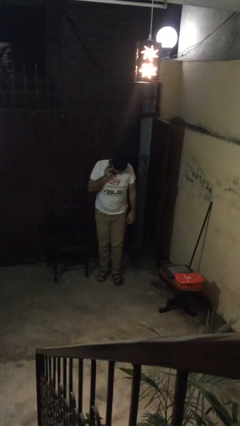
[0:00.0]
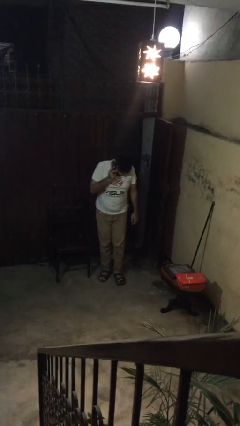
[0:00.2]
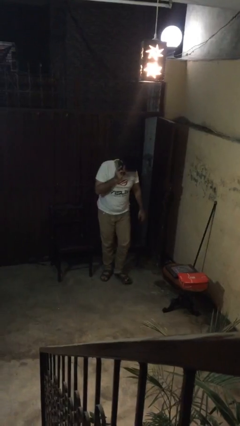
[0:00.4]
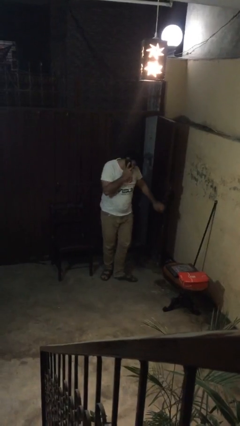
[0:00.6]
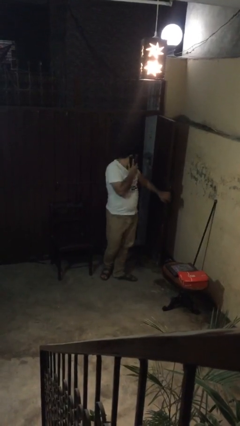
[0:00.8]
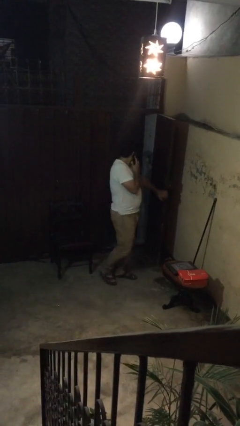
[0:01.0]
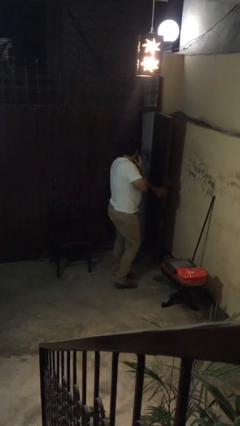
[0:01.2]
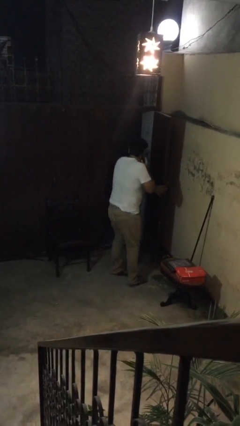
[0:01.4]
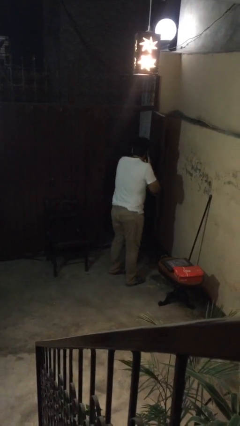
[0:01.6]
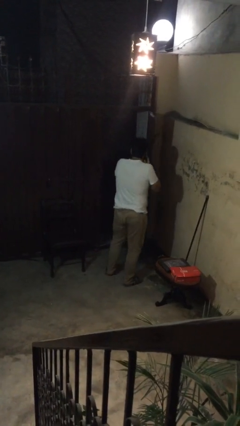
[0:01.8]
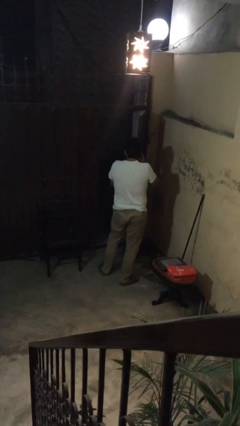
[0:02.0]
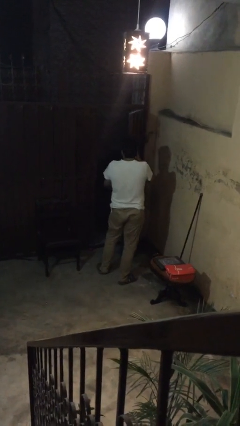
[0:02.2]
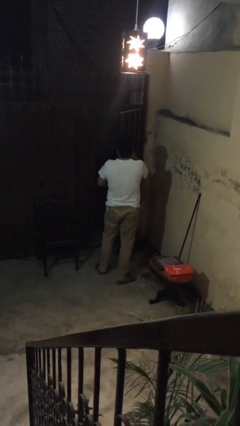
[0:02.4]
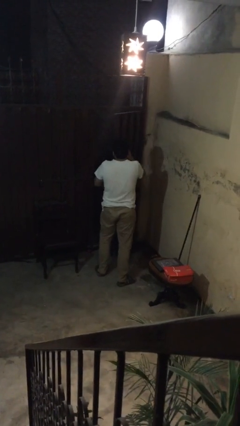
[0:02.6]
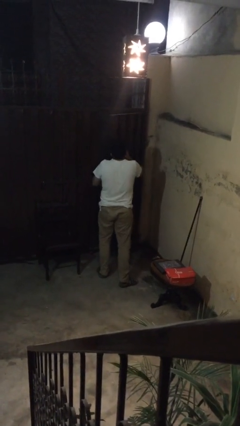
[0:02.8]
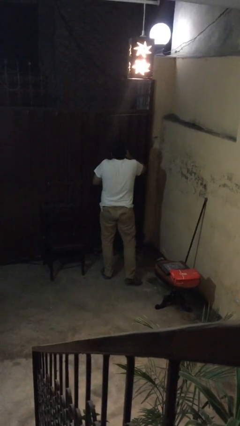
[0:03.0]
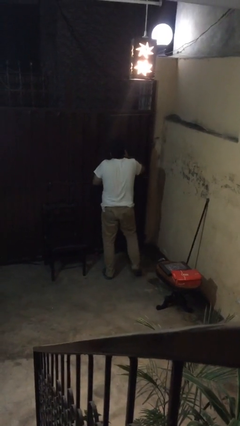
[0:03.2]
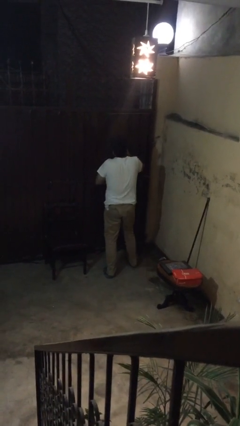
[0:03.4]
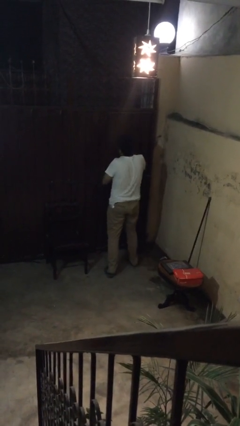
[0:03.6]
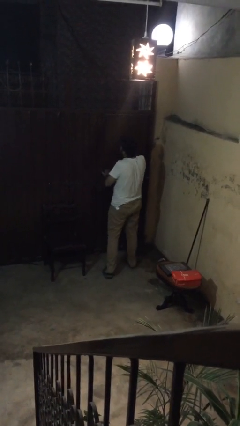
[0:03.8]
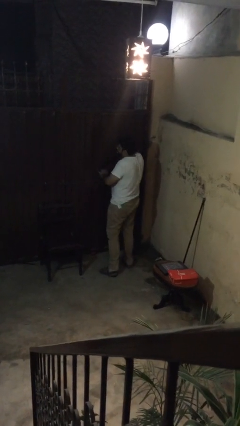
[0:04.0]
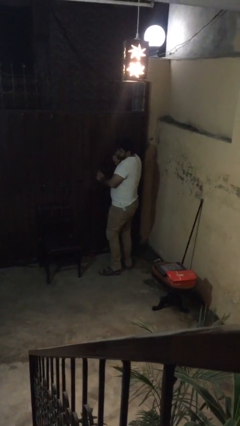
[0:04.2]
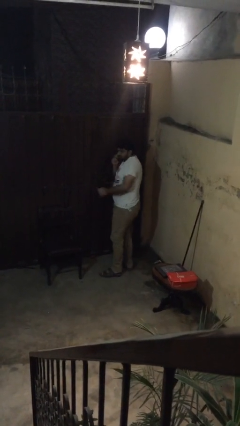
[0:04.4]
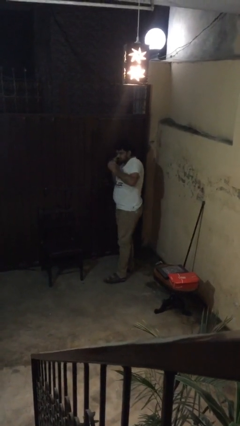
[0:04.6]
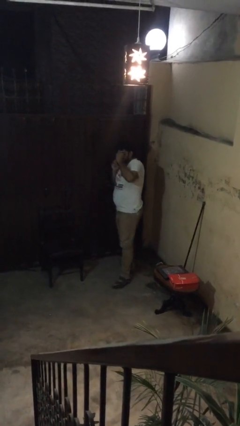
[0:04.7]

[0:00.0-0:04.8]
person closes facility door

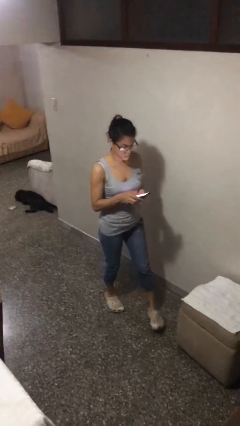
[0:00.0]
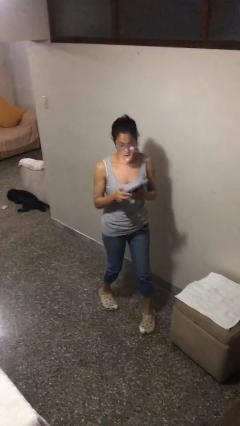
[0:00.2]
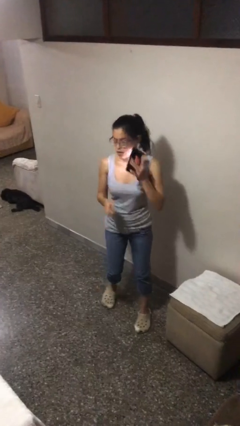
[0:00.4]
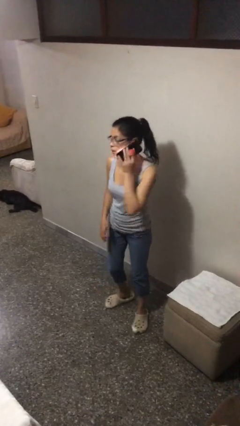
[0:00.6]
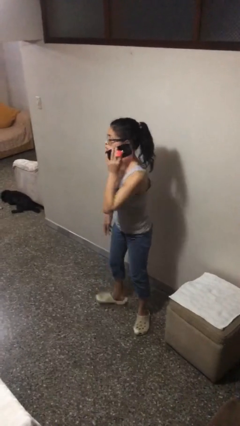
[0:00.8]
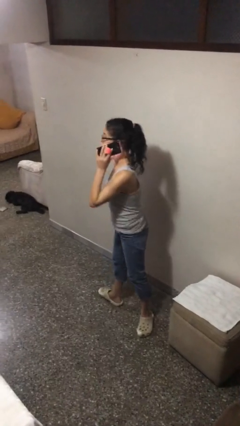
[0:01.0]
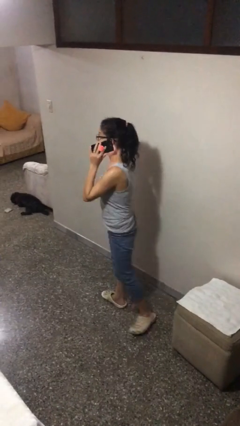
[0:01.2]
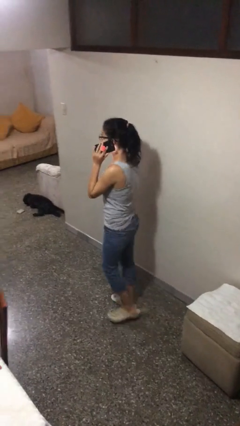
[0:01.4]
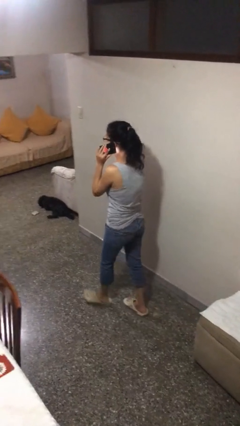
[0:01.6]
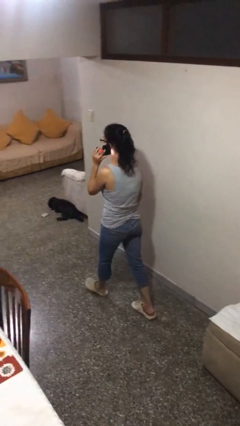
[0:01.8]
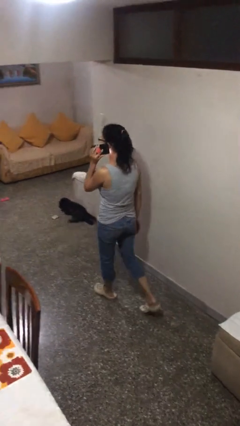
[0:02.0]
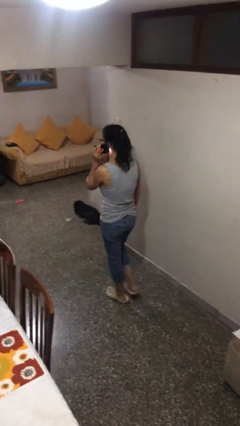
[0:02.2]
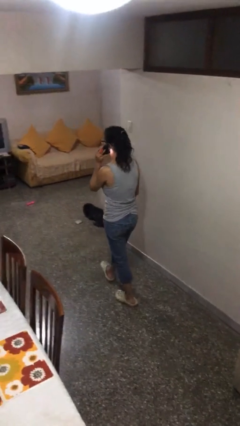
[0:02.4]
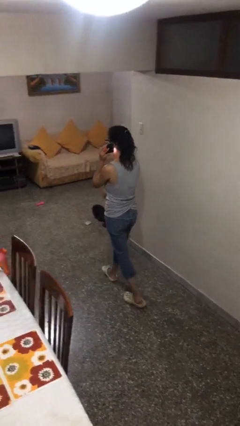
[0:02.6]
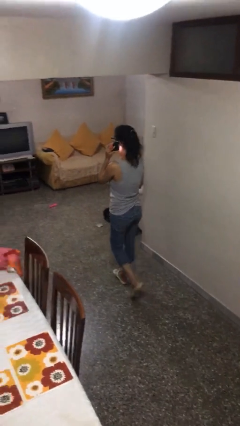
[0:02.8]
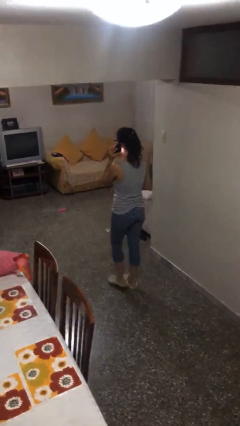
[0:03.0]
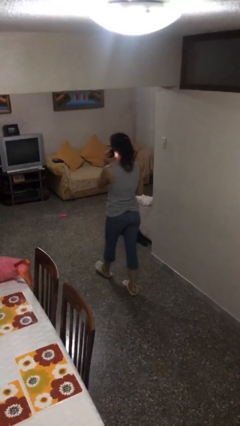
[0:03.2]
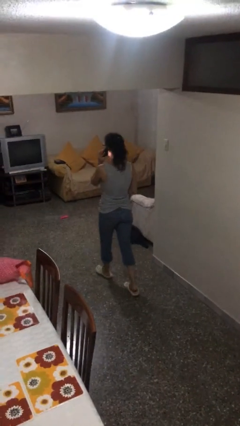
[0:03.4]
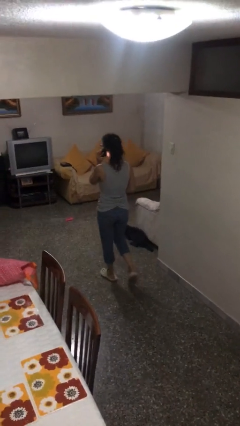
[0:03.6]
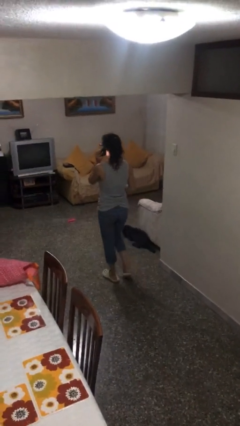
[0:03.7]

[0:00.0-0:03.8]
person talks on phone

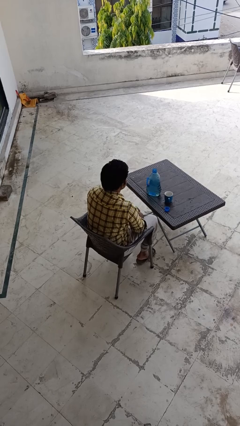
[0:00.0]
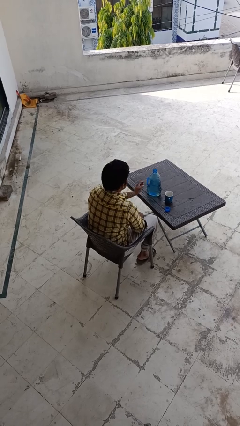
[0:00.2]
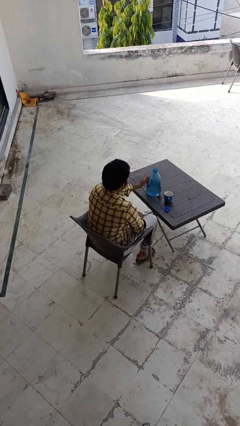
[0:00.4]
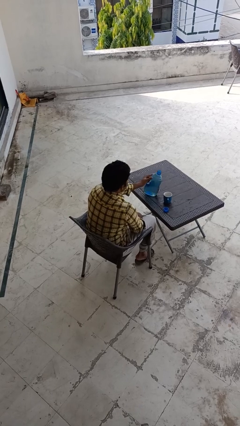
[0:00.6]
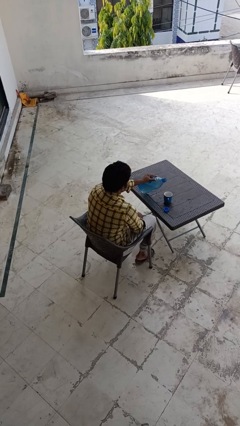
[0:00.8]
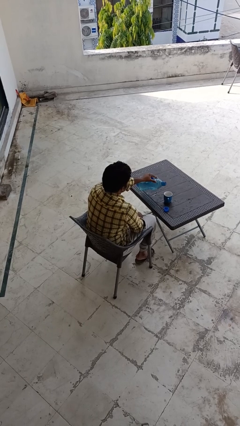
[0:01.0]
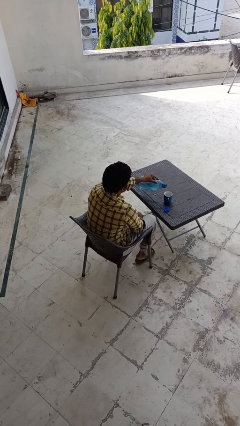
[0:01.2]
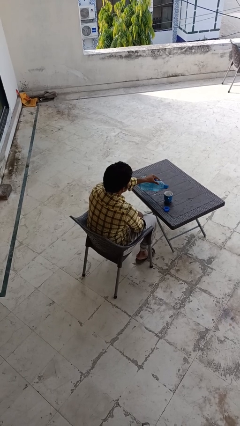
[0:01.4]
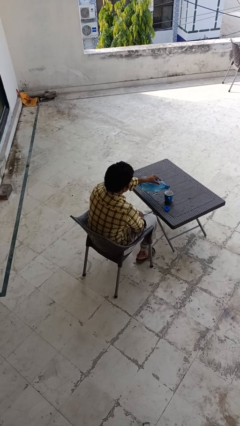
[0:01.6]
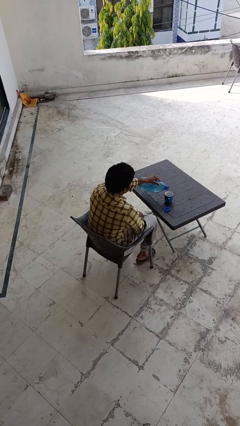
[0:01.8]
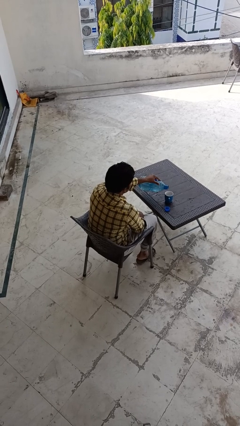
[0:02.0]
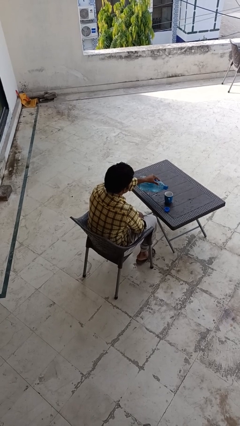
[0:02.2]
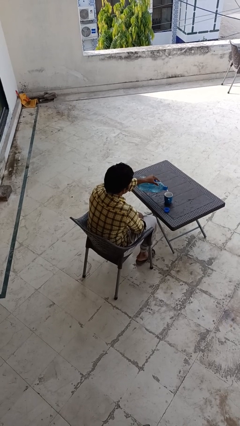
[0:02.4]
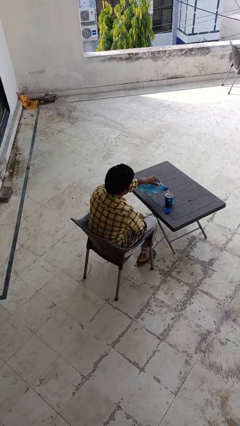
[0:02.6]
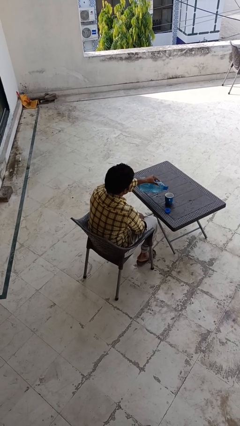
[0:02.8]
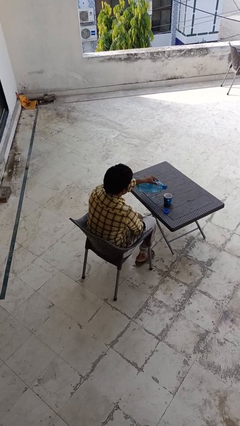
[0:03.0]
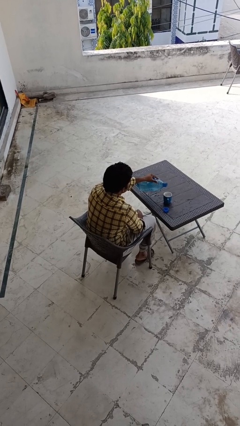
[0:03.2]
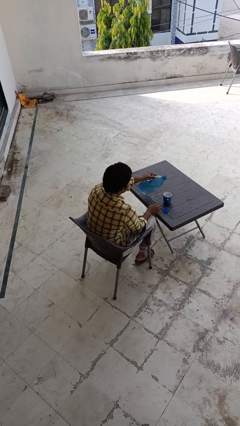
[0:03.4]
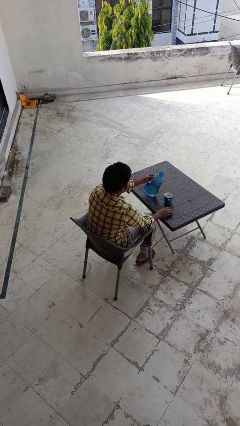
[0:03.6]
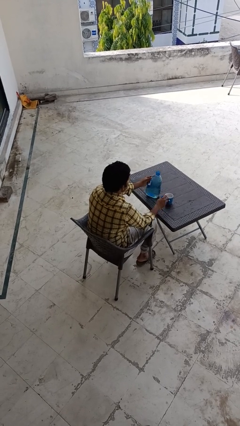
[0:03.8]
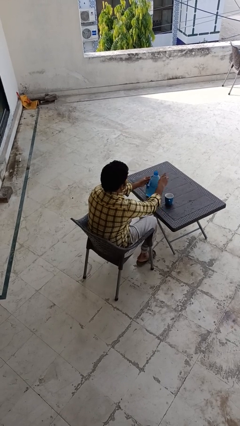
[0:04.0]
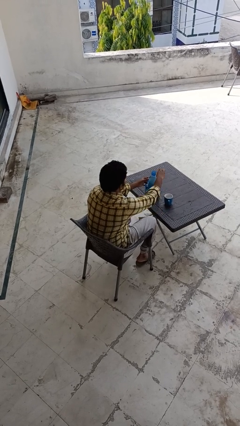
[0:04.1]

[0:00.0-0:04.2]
person pours liquid into cup

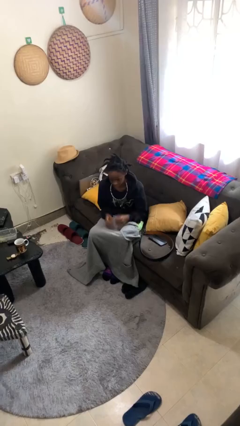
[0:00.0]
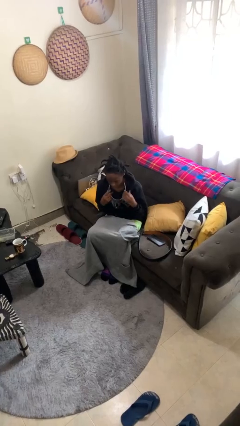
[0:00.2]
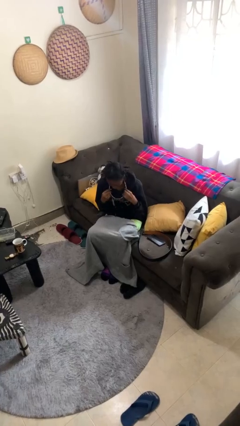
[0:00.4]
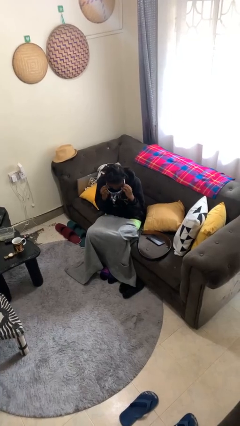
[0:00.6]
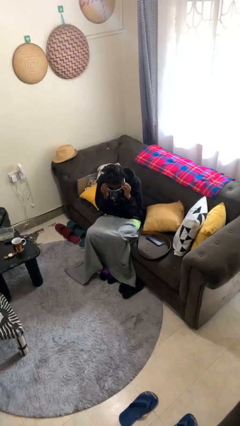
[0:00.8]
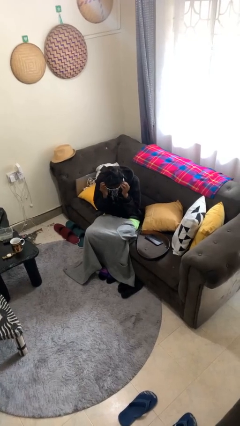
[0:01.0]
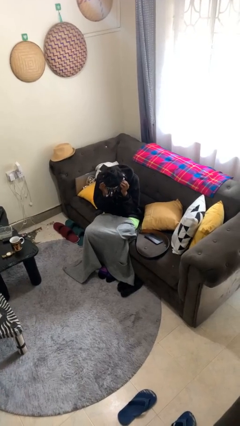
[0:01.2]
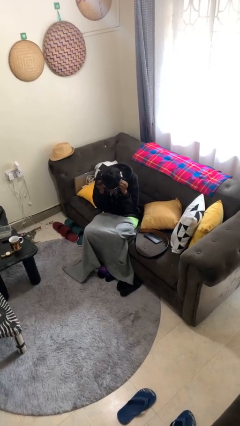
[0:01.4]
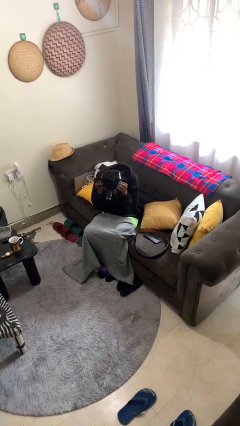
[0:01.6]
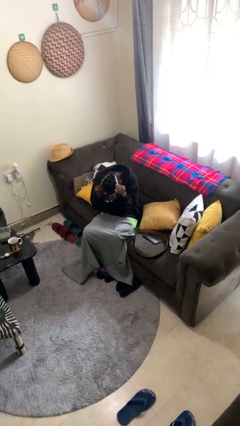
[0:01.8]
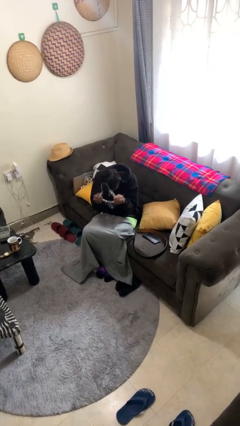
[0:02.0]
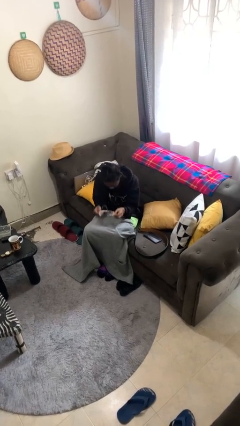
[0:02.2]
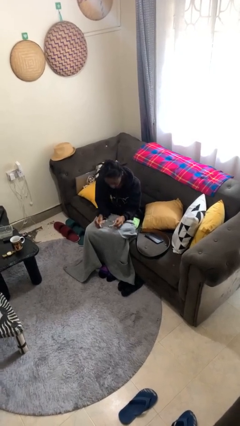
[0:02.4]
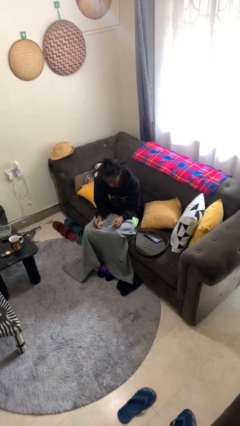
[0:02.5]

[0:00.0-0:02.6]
person takes off necklace

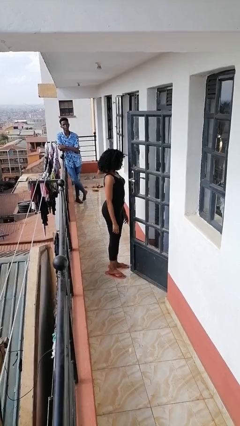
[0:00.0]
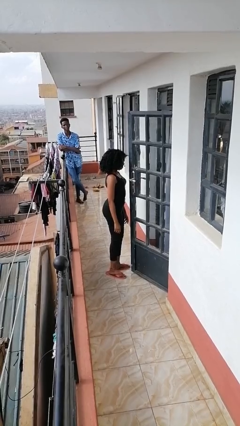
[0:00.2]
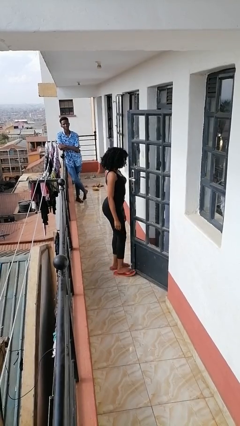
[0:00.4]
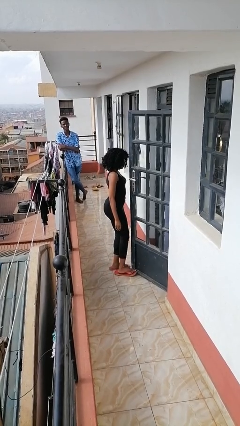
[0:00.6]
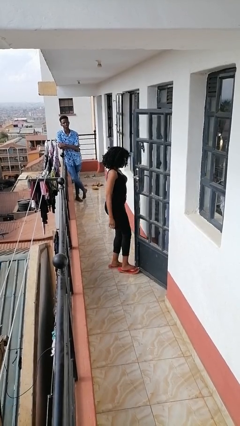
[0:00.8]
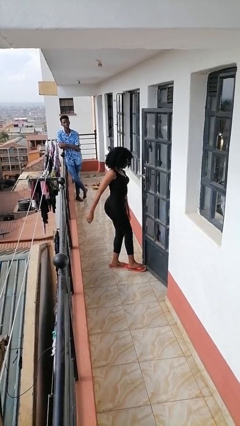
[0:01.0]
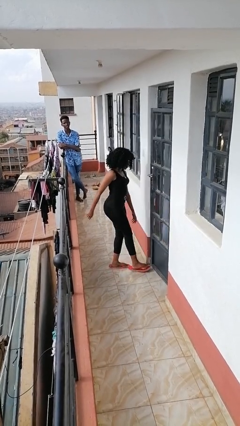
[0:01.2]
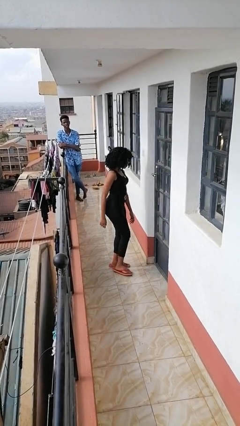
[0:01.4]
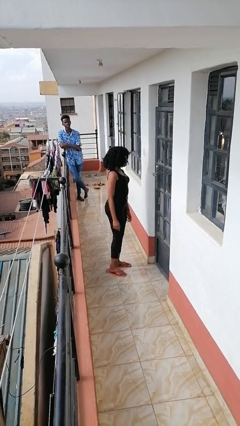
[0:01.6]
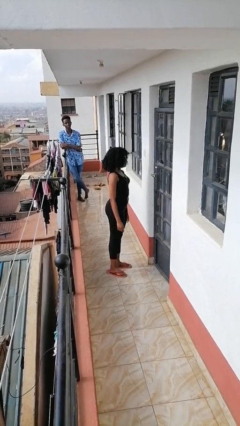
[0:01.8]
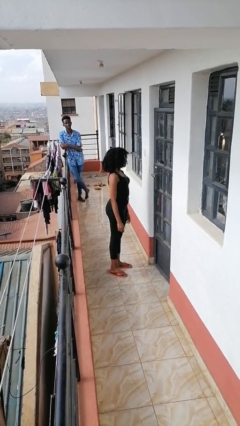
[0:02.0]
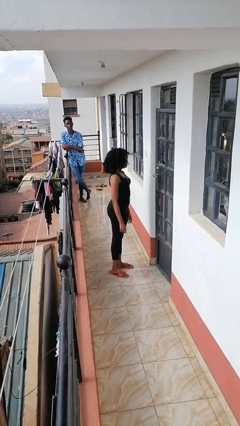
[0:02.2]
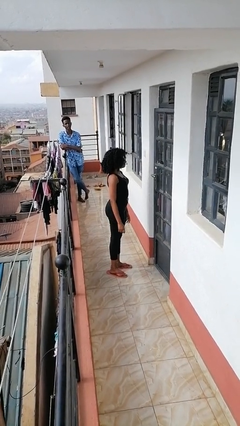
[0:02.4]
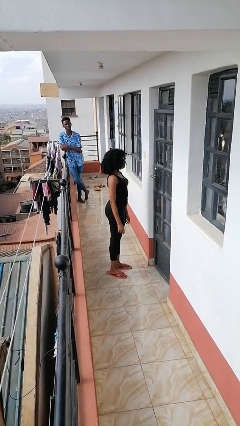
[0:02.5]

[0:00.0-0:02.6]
person closes door with foot
